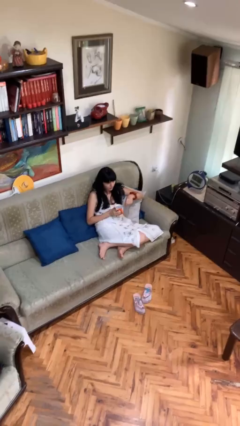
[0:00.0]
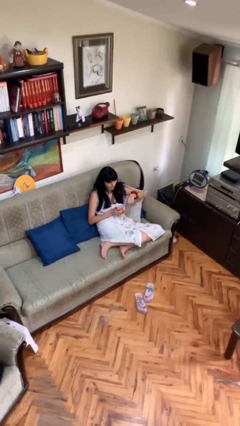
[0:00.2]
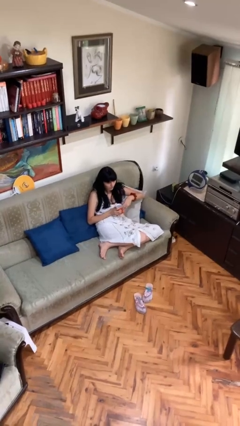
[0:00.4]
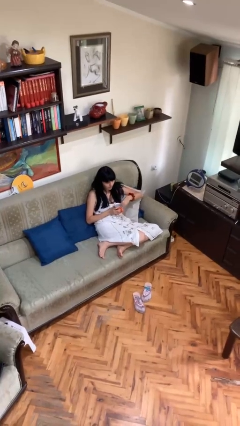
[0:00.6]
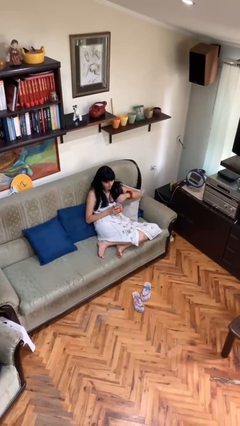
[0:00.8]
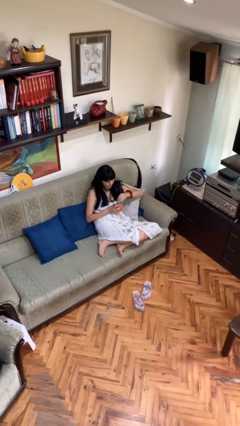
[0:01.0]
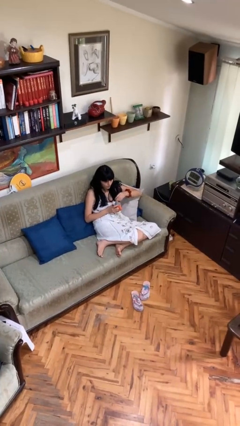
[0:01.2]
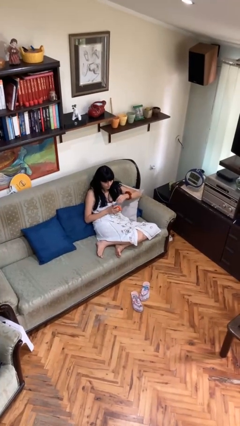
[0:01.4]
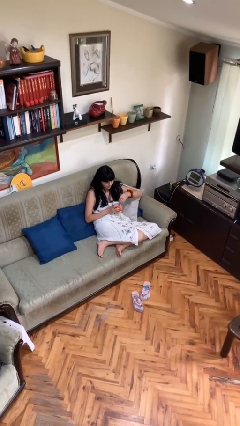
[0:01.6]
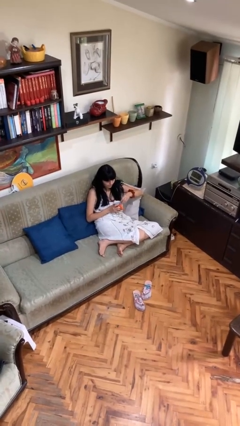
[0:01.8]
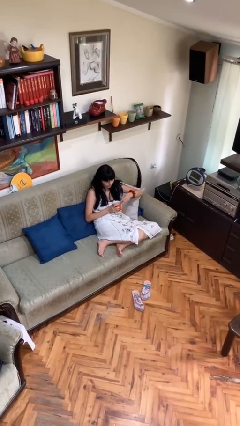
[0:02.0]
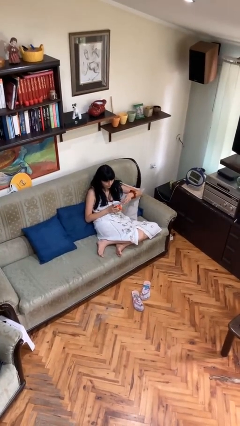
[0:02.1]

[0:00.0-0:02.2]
person stirs mug

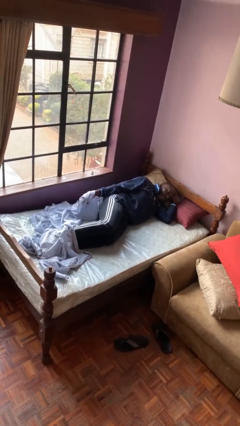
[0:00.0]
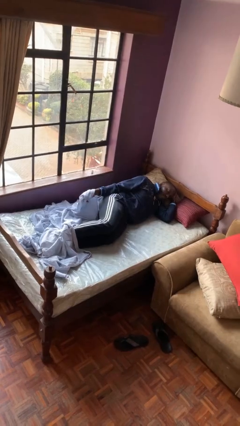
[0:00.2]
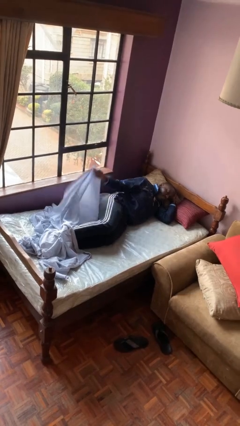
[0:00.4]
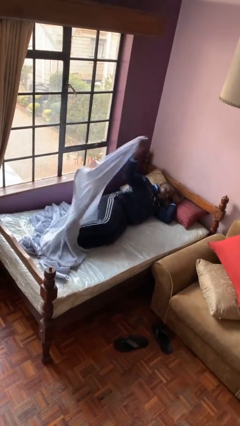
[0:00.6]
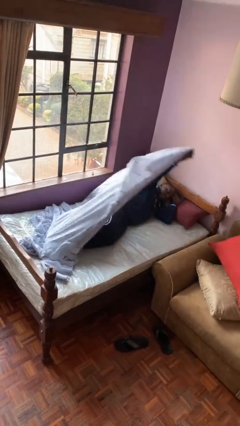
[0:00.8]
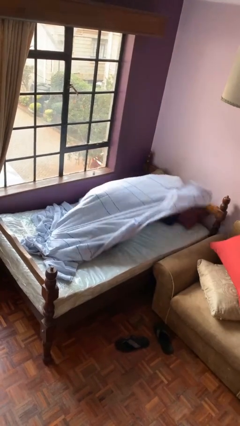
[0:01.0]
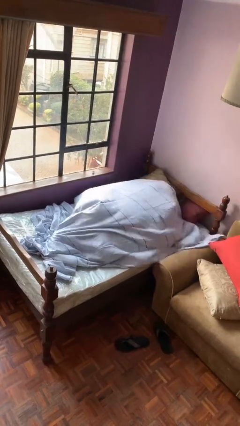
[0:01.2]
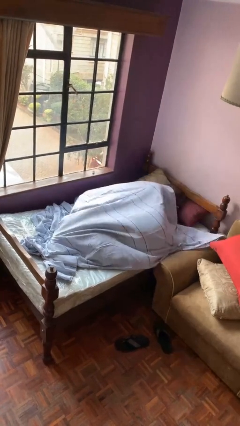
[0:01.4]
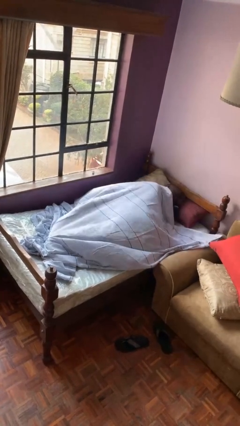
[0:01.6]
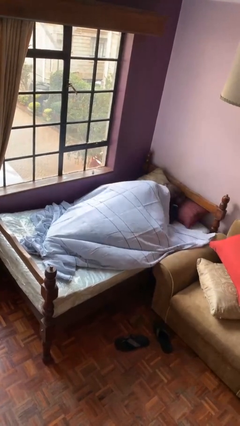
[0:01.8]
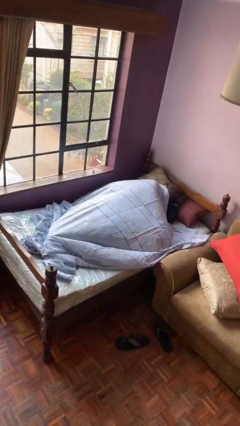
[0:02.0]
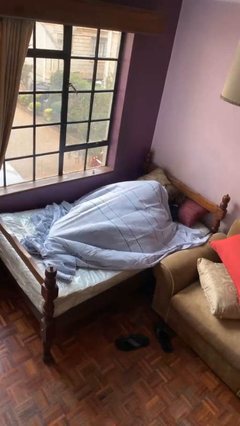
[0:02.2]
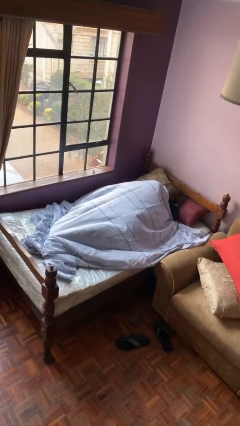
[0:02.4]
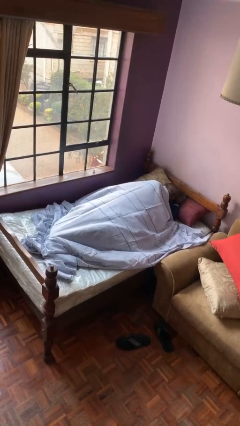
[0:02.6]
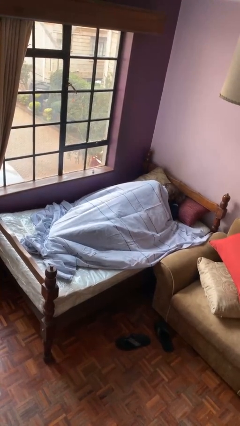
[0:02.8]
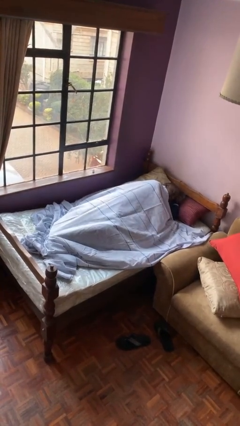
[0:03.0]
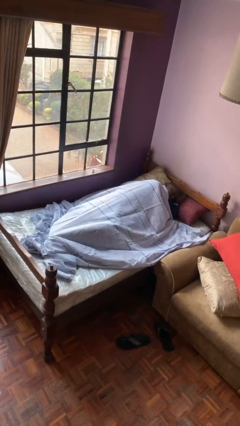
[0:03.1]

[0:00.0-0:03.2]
person covers with bedsheets

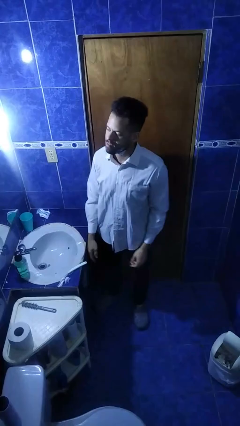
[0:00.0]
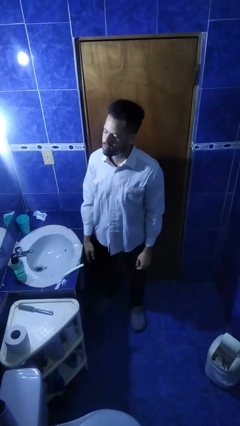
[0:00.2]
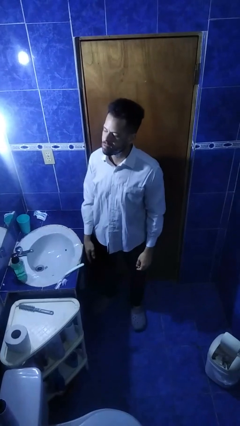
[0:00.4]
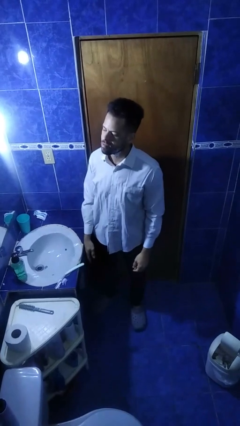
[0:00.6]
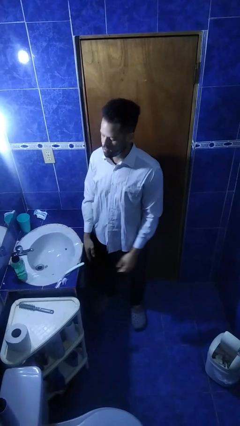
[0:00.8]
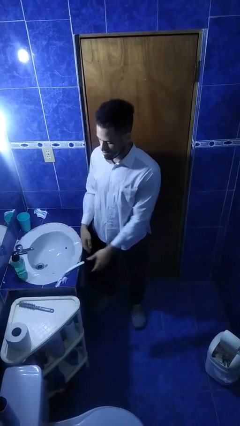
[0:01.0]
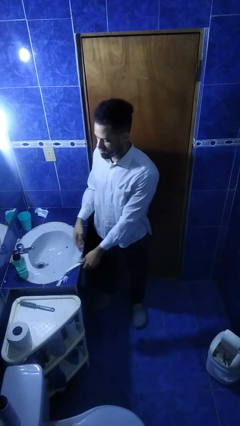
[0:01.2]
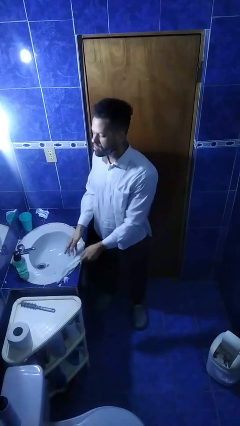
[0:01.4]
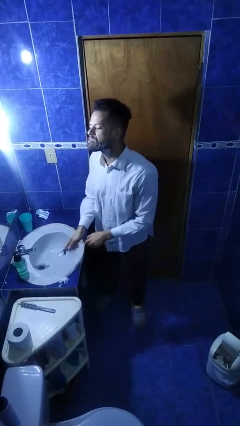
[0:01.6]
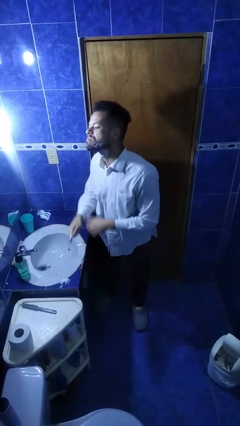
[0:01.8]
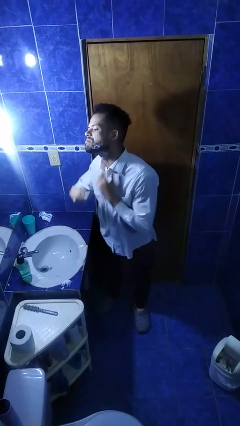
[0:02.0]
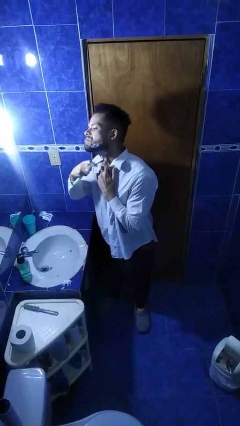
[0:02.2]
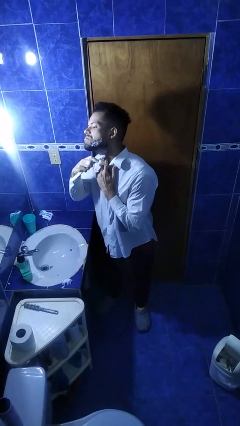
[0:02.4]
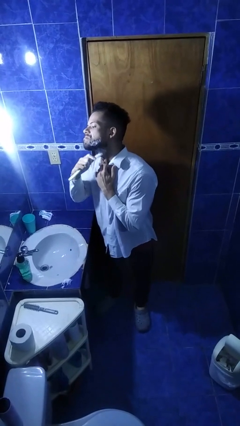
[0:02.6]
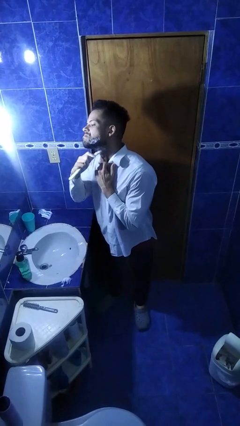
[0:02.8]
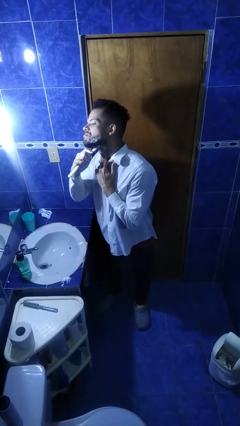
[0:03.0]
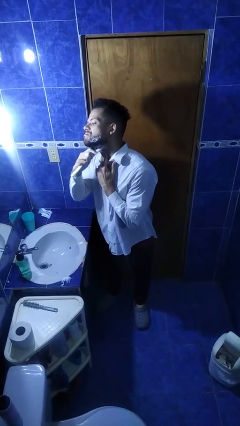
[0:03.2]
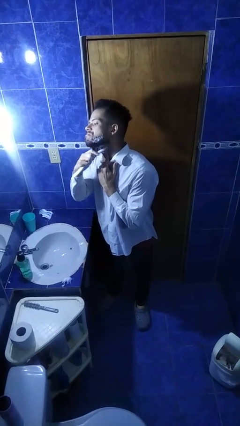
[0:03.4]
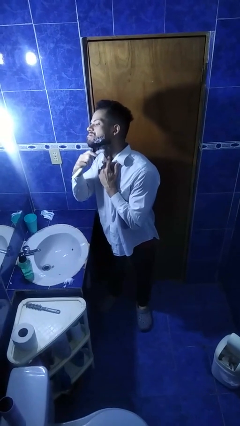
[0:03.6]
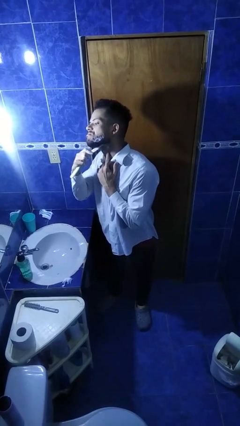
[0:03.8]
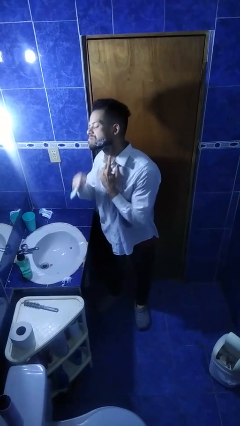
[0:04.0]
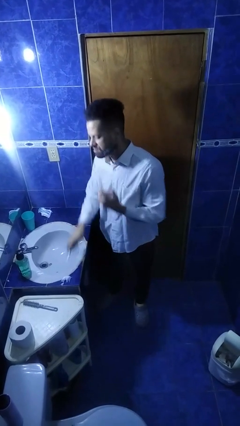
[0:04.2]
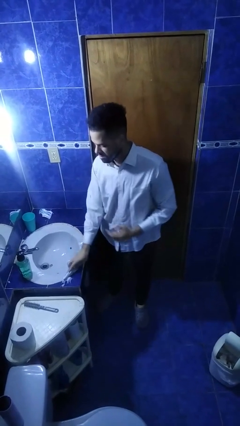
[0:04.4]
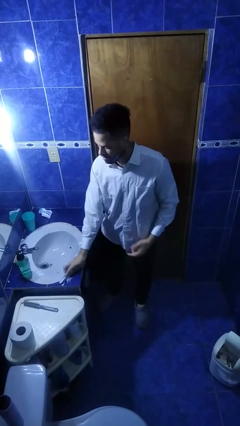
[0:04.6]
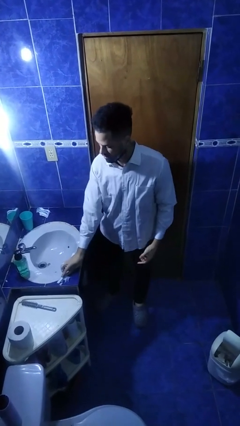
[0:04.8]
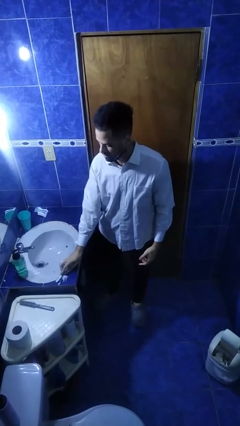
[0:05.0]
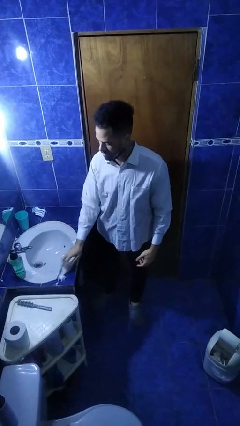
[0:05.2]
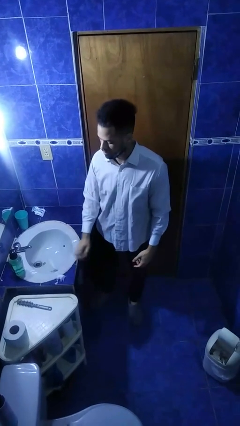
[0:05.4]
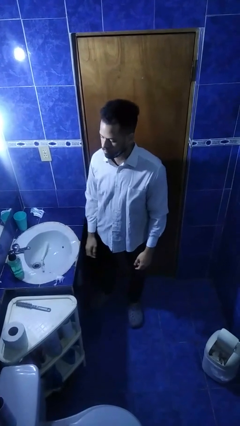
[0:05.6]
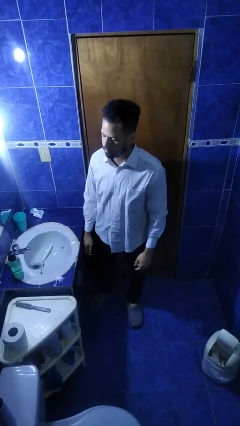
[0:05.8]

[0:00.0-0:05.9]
person shaves face

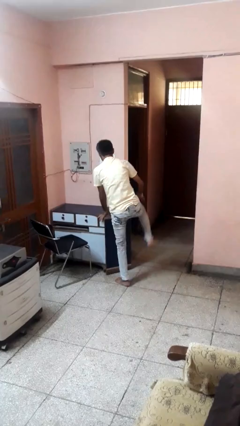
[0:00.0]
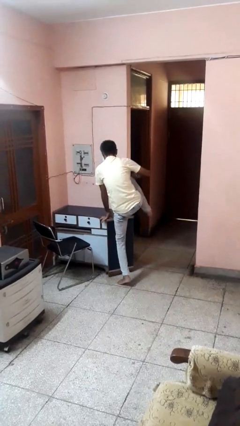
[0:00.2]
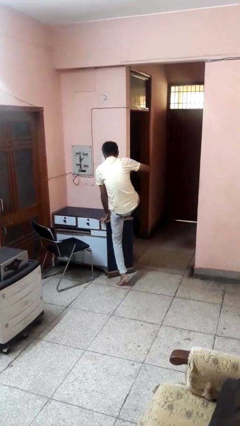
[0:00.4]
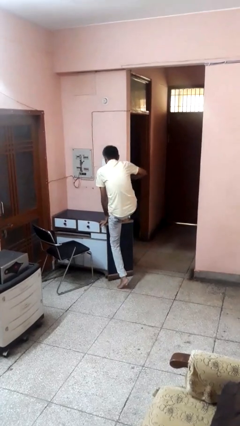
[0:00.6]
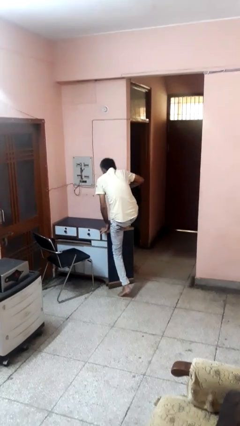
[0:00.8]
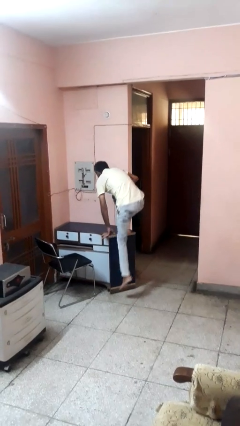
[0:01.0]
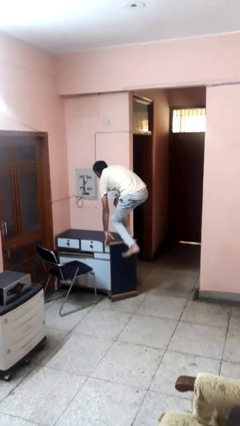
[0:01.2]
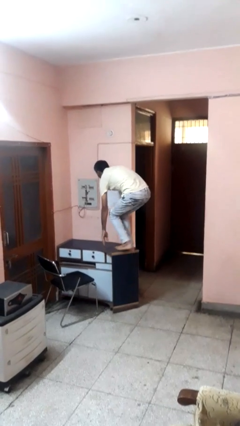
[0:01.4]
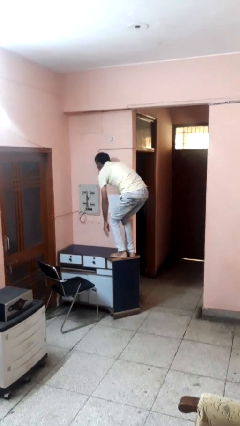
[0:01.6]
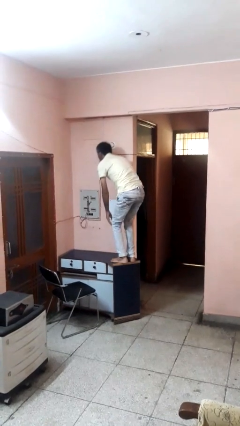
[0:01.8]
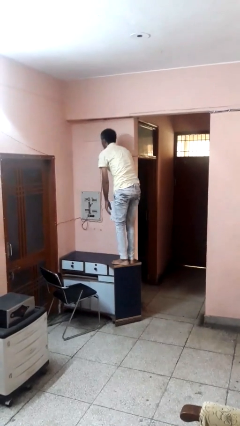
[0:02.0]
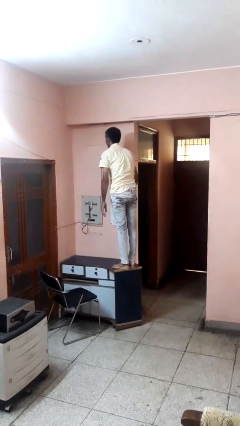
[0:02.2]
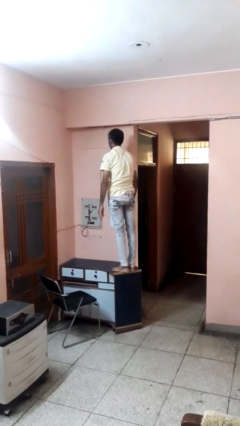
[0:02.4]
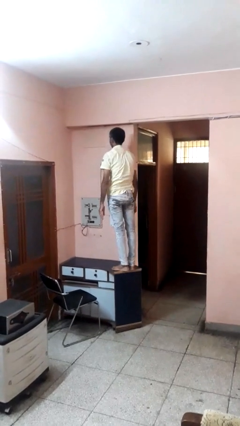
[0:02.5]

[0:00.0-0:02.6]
person climbs on table

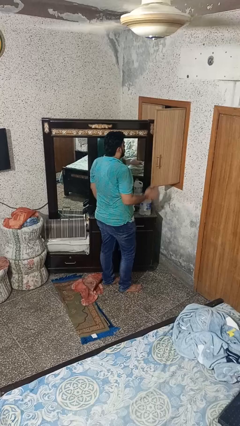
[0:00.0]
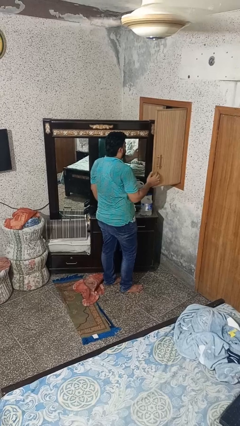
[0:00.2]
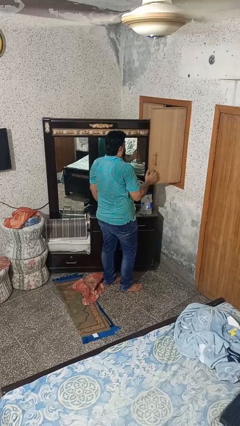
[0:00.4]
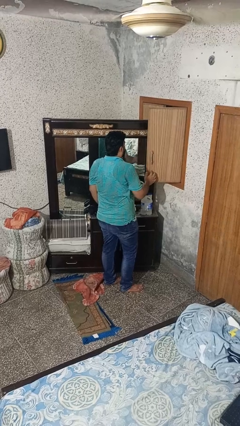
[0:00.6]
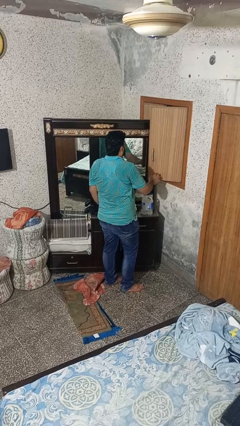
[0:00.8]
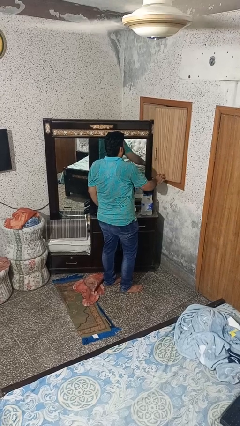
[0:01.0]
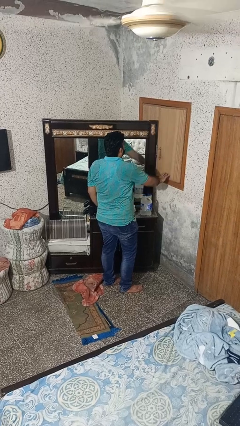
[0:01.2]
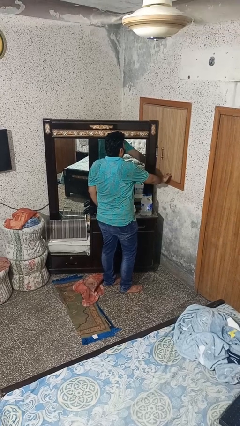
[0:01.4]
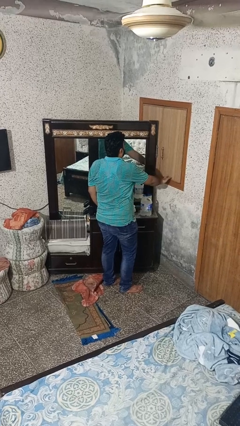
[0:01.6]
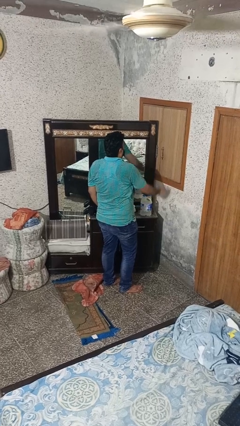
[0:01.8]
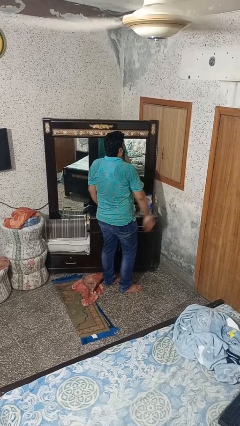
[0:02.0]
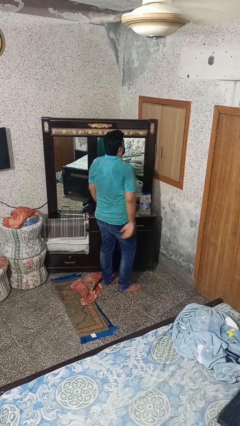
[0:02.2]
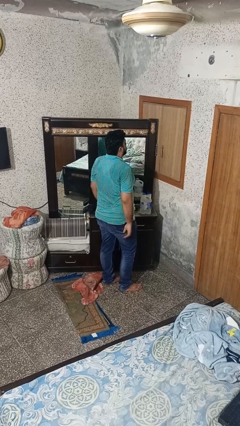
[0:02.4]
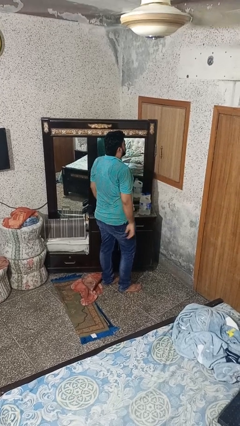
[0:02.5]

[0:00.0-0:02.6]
person closes home window

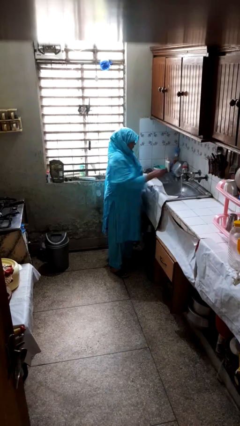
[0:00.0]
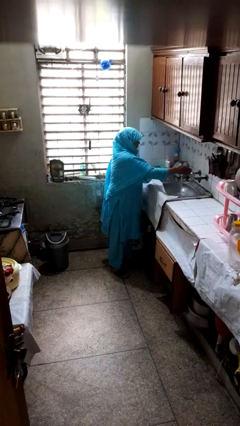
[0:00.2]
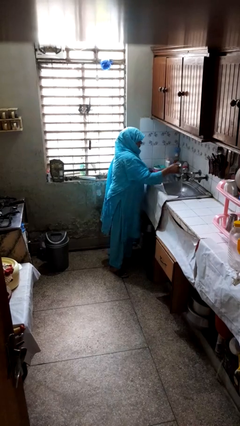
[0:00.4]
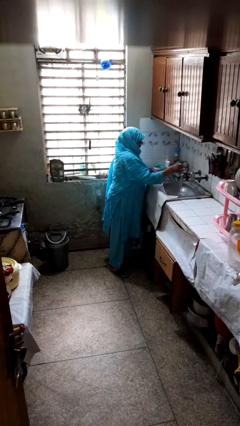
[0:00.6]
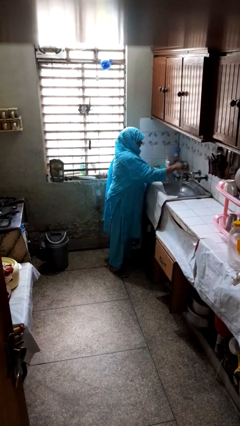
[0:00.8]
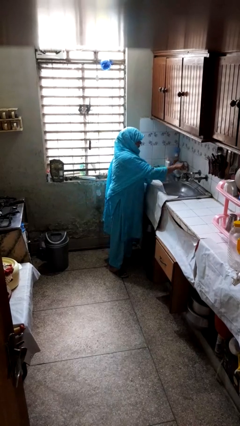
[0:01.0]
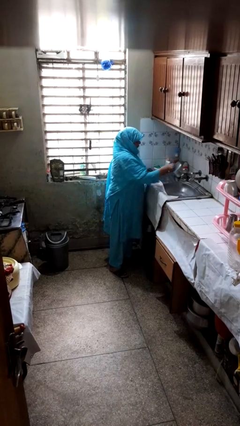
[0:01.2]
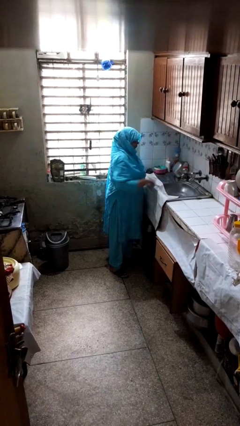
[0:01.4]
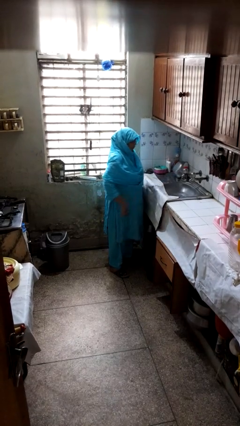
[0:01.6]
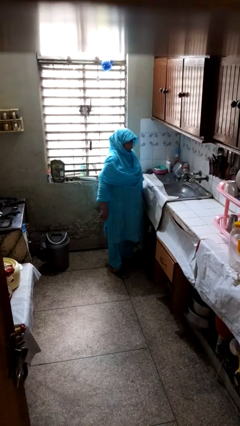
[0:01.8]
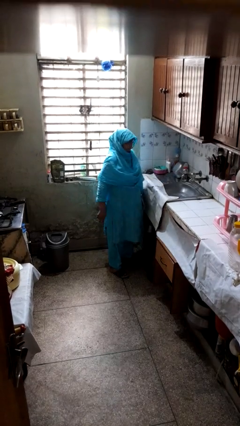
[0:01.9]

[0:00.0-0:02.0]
person turns off faucet
